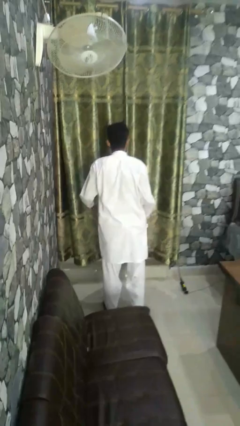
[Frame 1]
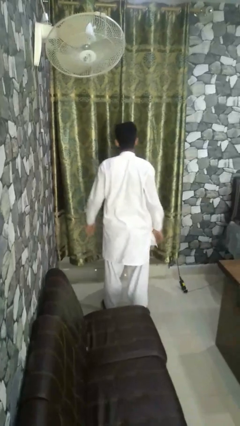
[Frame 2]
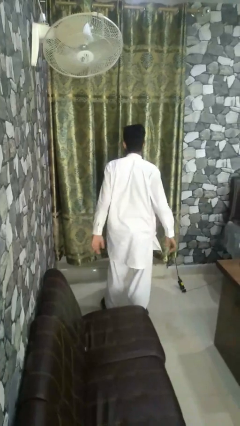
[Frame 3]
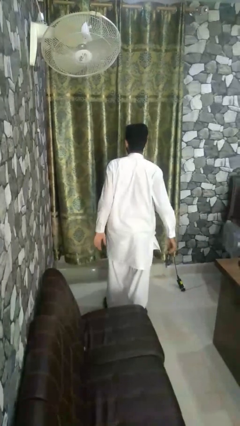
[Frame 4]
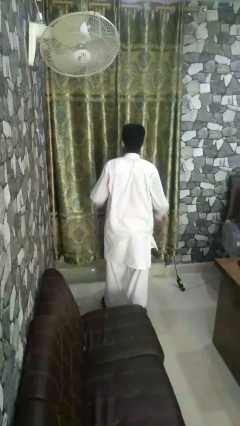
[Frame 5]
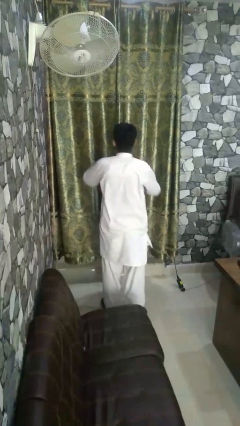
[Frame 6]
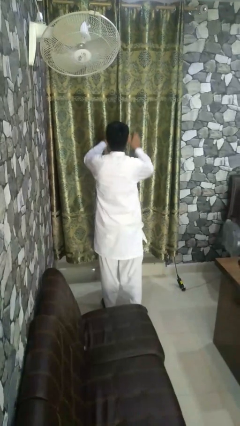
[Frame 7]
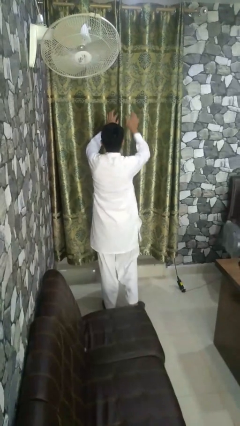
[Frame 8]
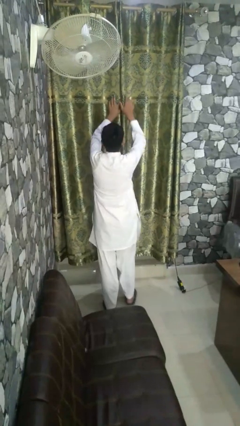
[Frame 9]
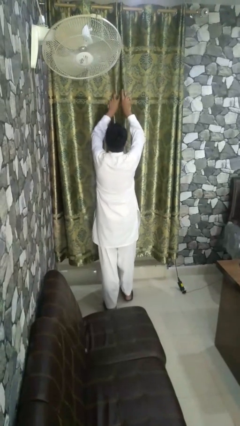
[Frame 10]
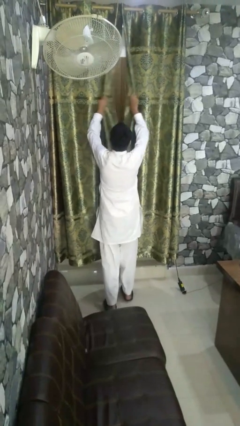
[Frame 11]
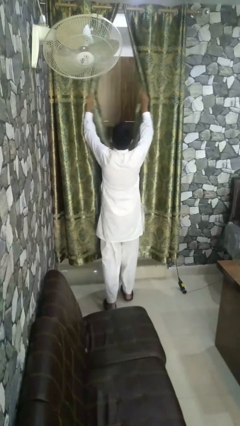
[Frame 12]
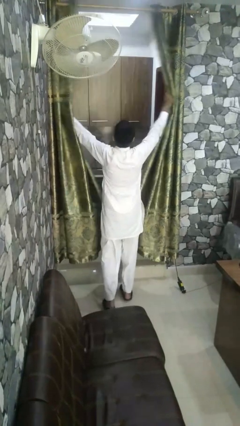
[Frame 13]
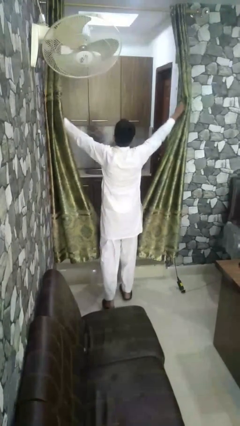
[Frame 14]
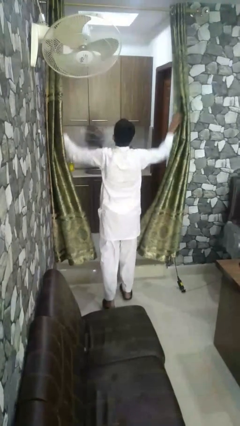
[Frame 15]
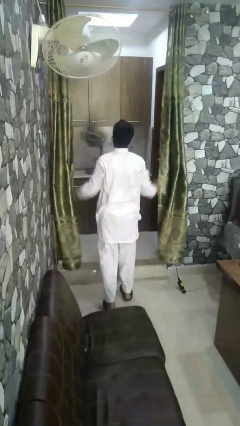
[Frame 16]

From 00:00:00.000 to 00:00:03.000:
person opens curtains

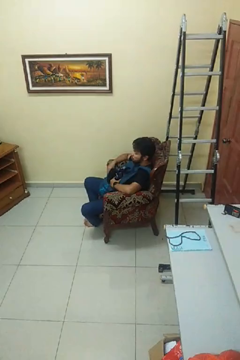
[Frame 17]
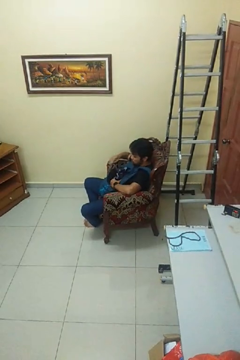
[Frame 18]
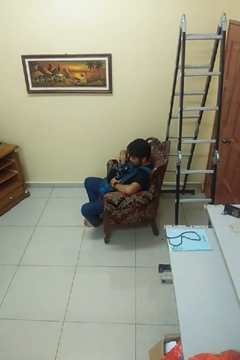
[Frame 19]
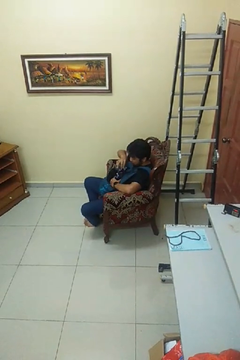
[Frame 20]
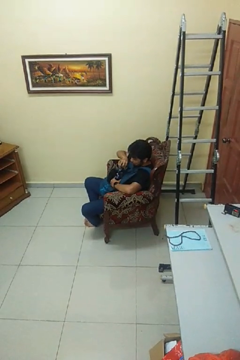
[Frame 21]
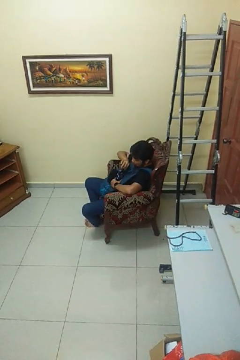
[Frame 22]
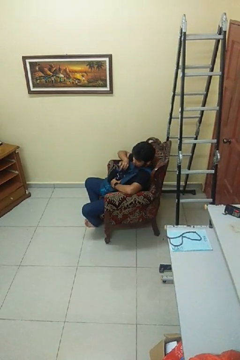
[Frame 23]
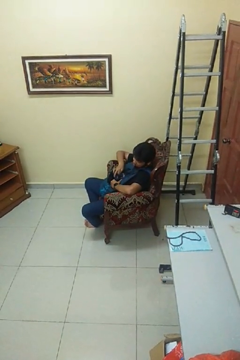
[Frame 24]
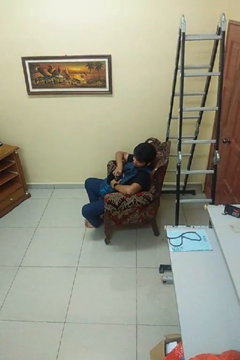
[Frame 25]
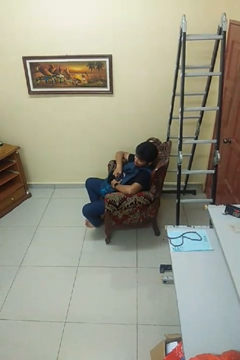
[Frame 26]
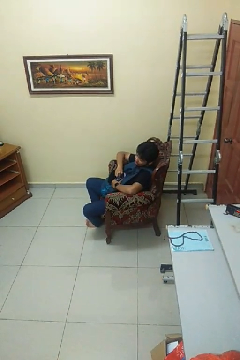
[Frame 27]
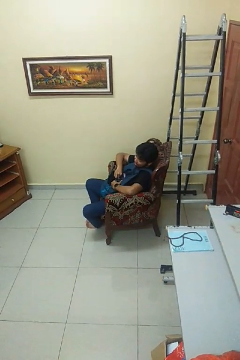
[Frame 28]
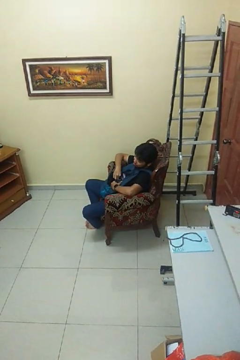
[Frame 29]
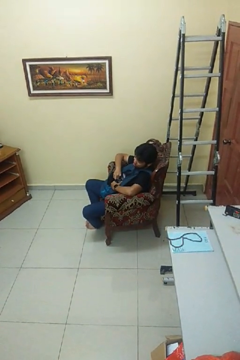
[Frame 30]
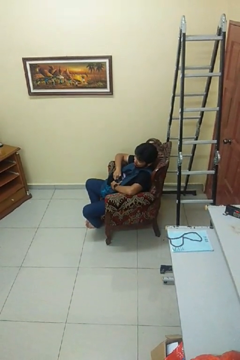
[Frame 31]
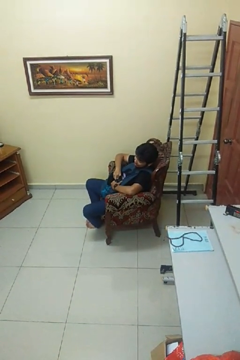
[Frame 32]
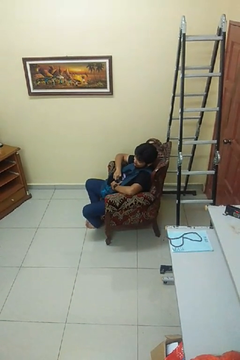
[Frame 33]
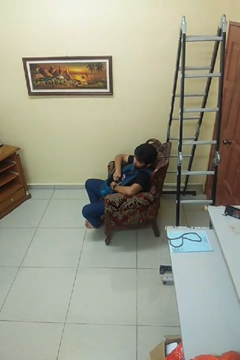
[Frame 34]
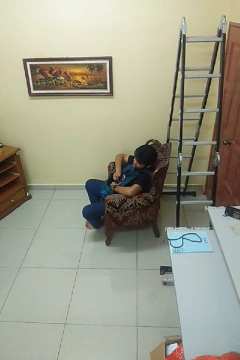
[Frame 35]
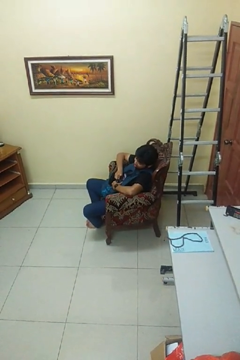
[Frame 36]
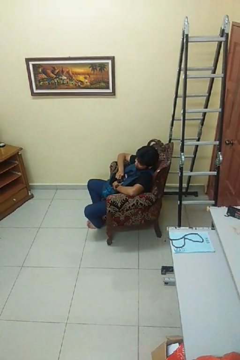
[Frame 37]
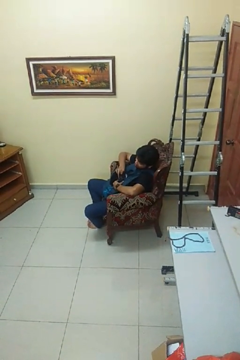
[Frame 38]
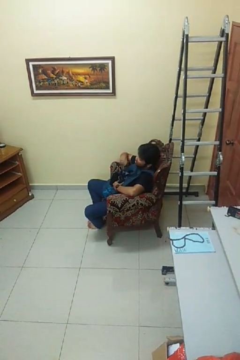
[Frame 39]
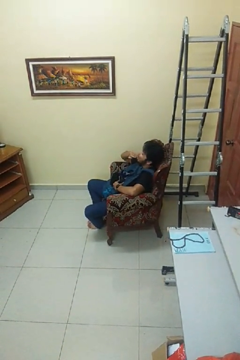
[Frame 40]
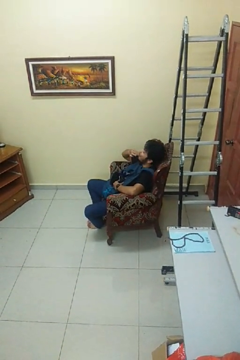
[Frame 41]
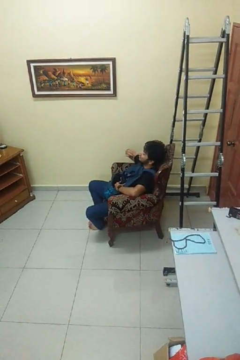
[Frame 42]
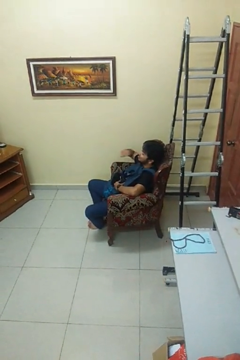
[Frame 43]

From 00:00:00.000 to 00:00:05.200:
person eats snack from bag

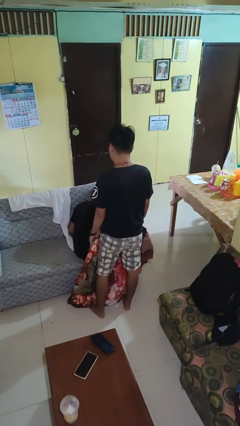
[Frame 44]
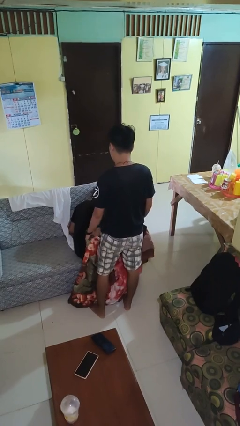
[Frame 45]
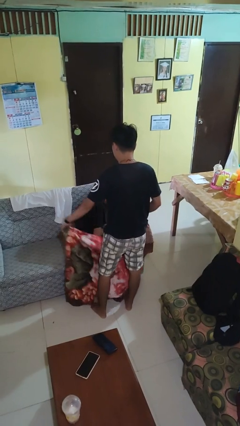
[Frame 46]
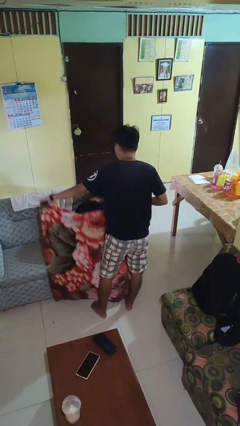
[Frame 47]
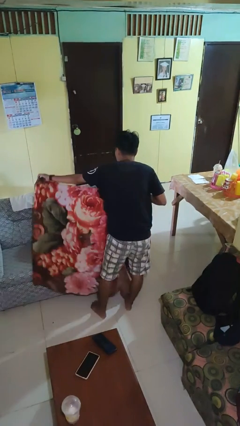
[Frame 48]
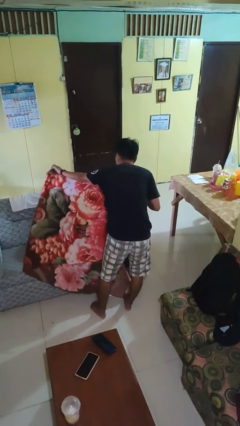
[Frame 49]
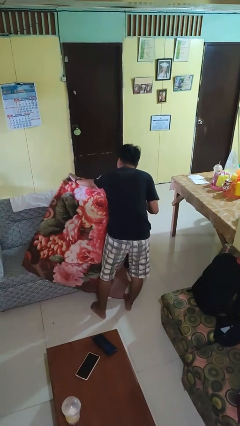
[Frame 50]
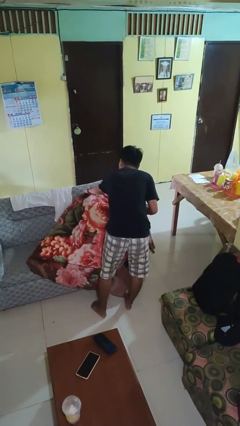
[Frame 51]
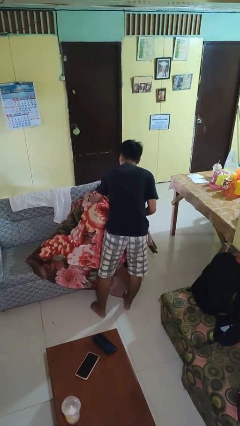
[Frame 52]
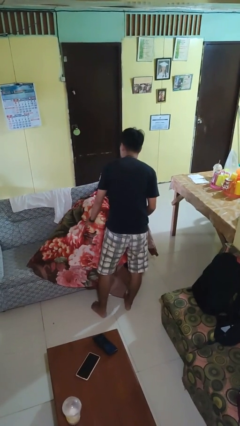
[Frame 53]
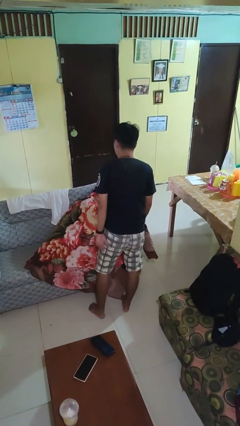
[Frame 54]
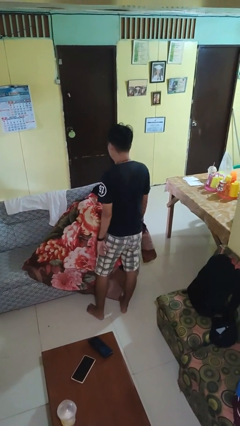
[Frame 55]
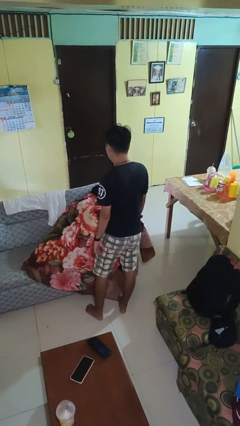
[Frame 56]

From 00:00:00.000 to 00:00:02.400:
person covers friend with blanket

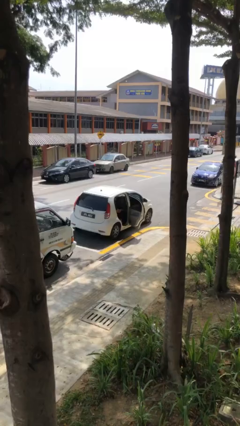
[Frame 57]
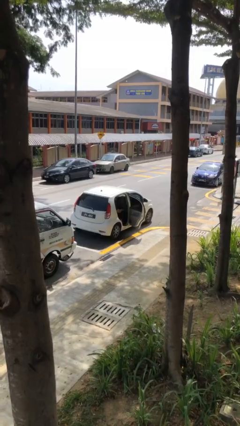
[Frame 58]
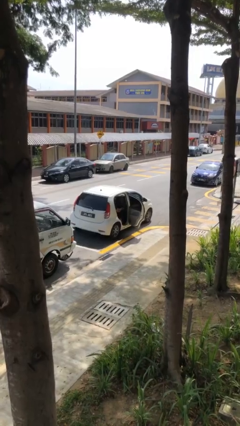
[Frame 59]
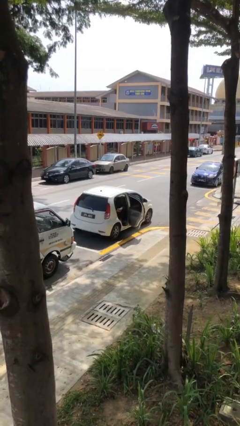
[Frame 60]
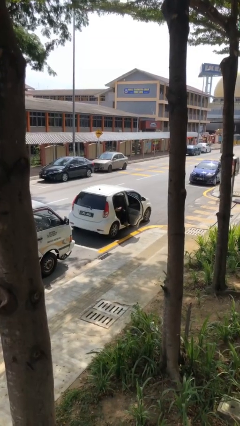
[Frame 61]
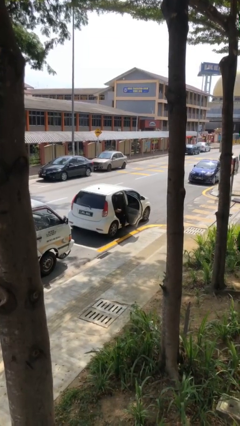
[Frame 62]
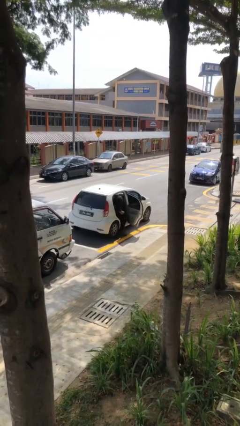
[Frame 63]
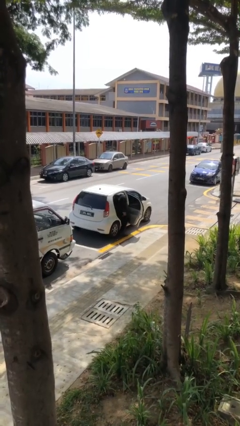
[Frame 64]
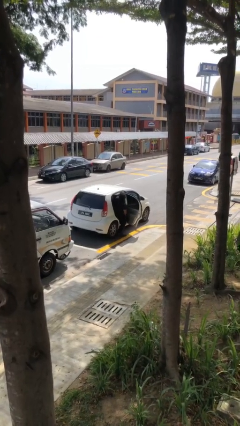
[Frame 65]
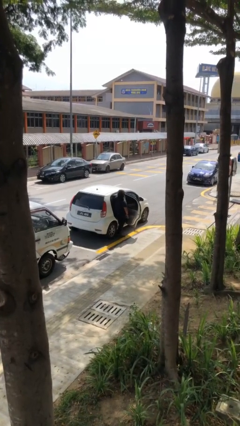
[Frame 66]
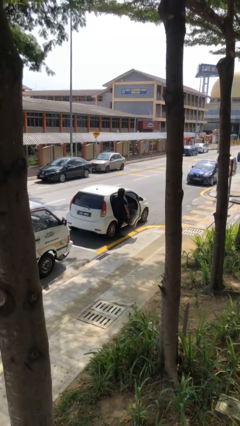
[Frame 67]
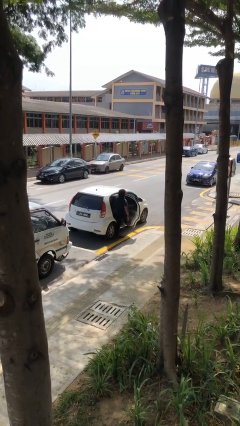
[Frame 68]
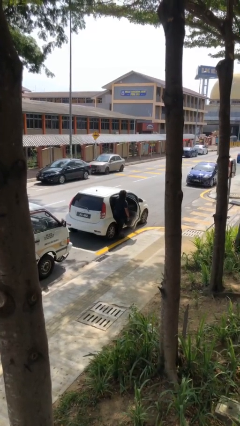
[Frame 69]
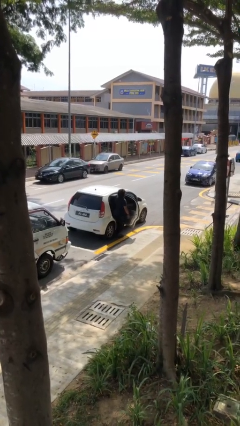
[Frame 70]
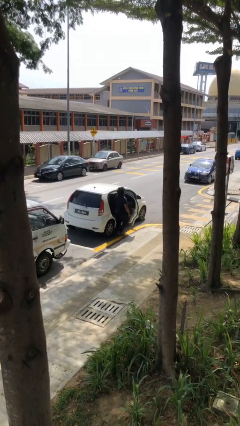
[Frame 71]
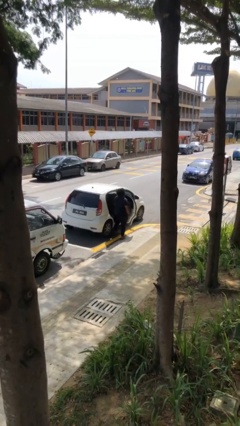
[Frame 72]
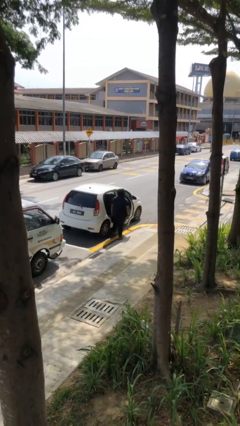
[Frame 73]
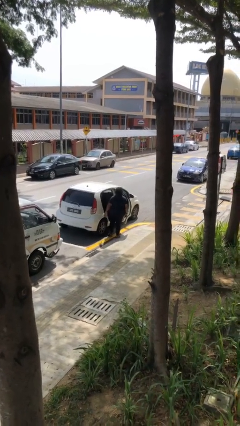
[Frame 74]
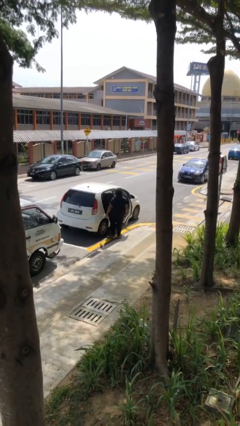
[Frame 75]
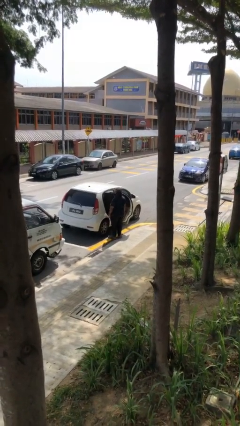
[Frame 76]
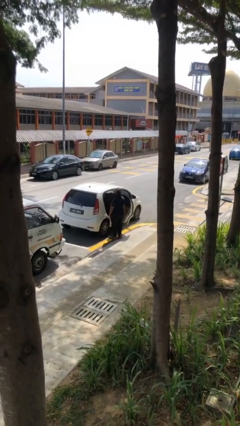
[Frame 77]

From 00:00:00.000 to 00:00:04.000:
person exits car

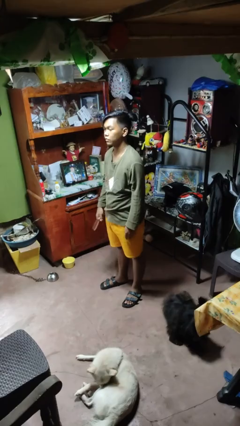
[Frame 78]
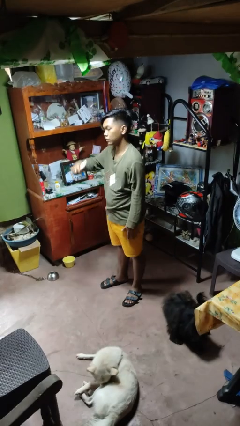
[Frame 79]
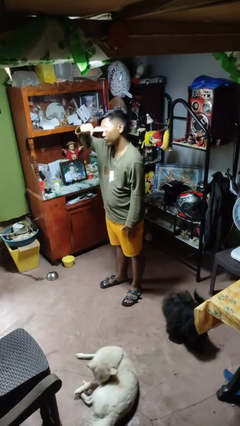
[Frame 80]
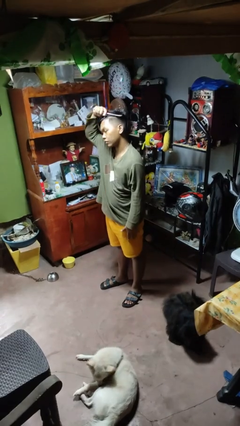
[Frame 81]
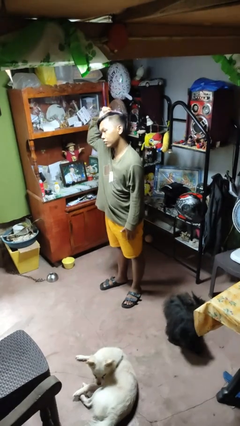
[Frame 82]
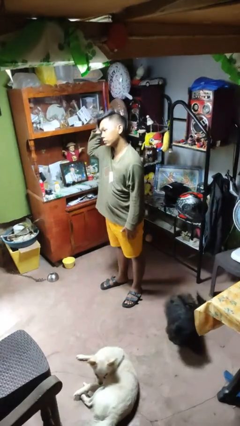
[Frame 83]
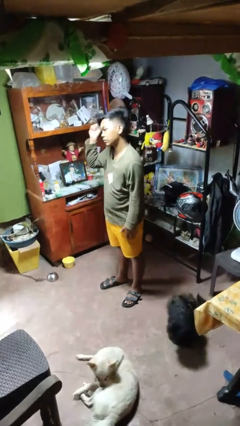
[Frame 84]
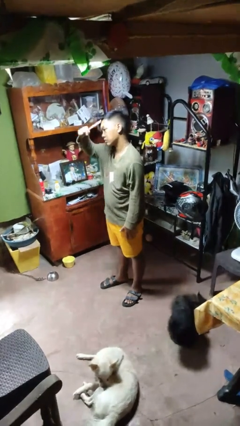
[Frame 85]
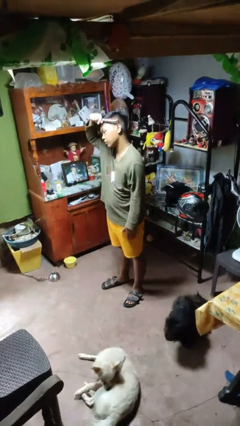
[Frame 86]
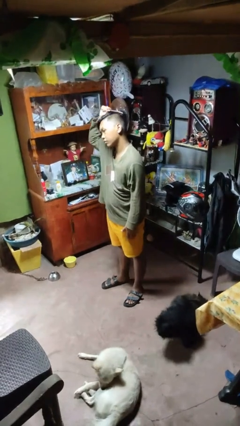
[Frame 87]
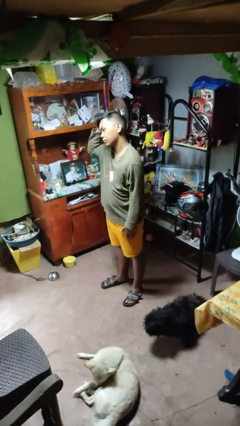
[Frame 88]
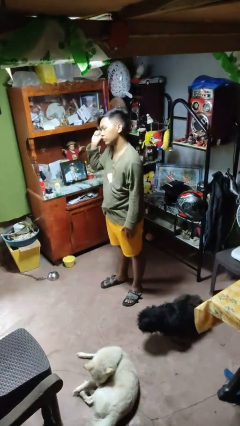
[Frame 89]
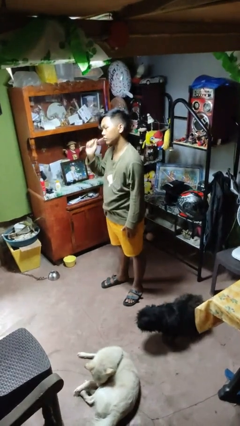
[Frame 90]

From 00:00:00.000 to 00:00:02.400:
person brushes hair

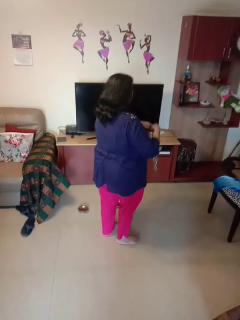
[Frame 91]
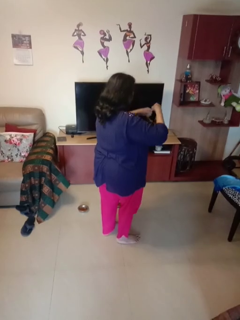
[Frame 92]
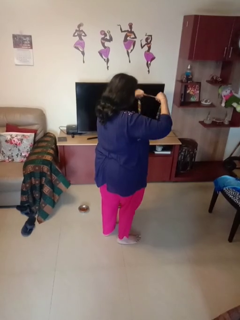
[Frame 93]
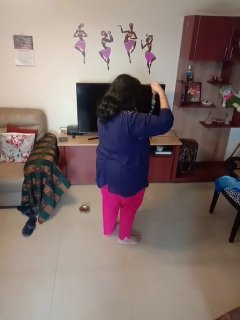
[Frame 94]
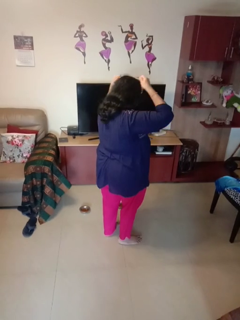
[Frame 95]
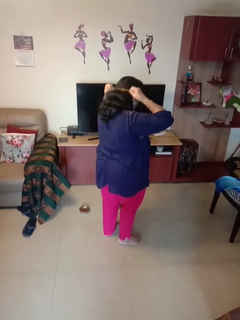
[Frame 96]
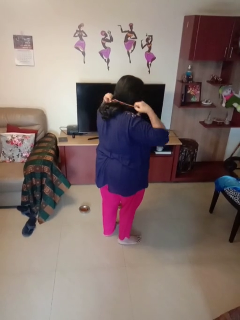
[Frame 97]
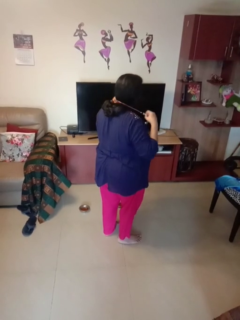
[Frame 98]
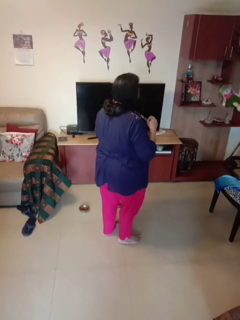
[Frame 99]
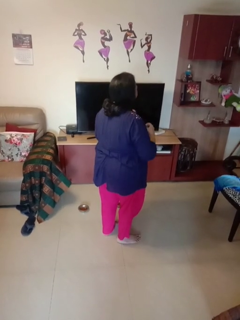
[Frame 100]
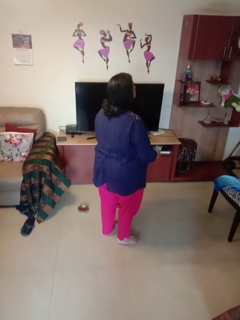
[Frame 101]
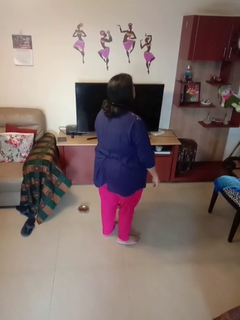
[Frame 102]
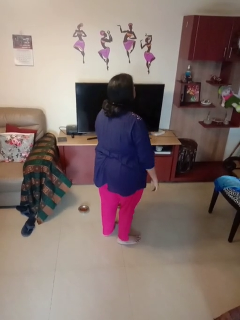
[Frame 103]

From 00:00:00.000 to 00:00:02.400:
person puts on necklace
